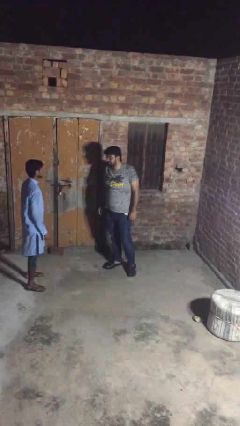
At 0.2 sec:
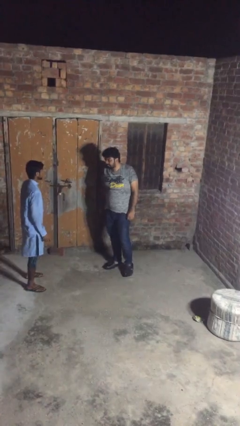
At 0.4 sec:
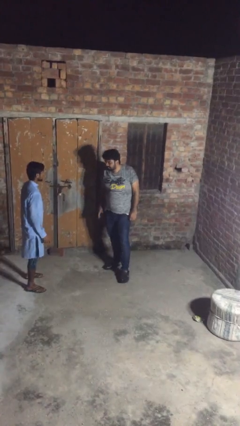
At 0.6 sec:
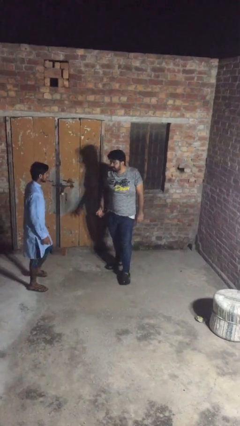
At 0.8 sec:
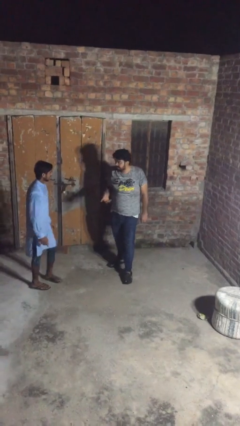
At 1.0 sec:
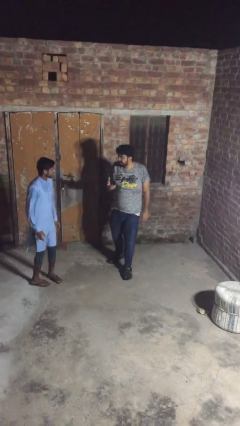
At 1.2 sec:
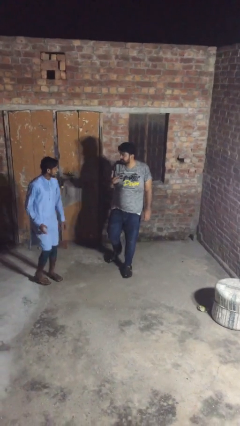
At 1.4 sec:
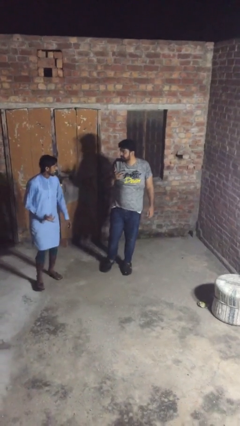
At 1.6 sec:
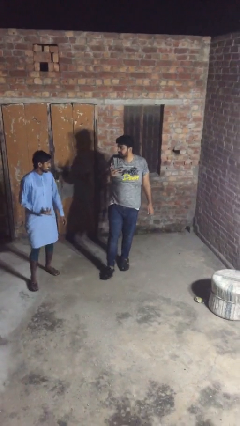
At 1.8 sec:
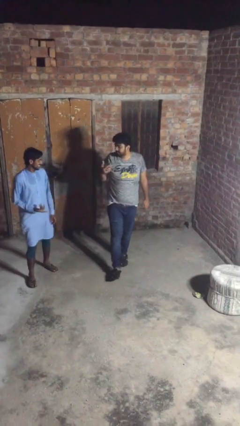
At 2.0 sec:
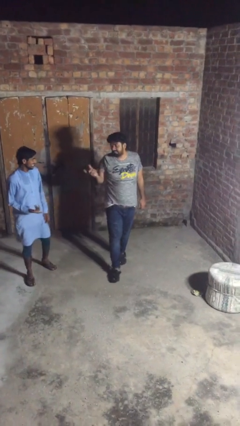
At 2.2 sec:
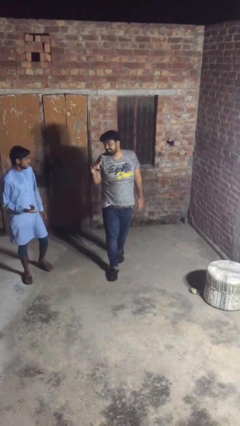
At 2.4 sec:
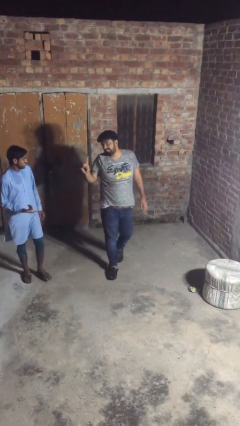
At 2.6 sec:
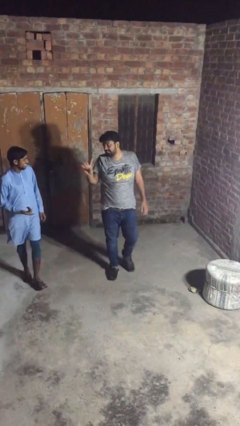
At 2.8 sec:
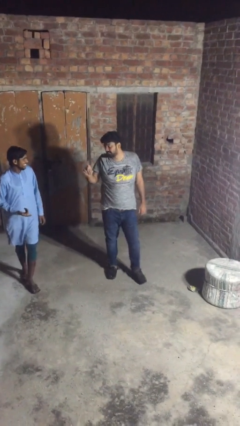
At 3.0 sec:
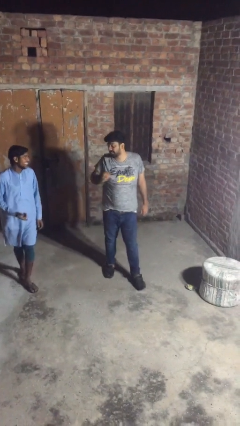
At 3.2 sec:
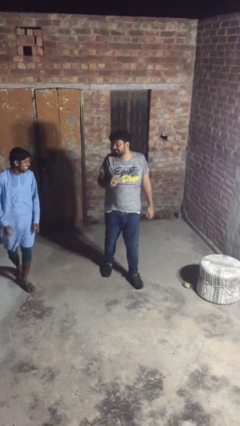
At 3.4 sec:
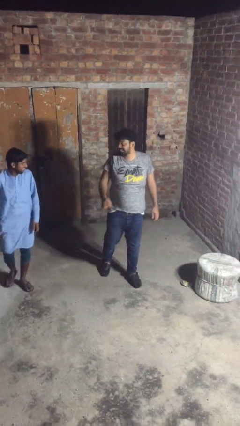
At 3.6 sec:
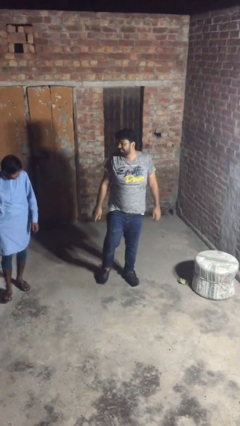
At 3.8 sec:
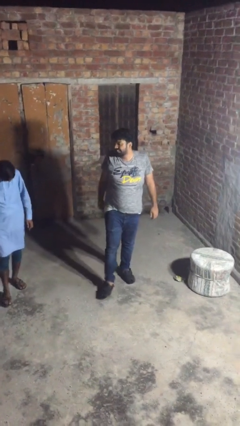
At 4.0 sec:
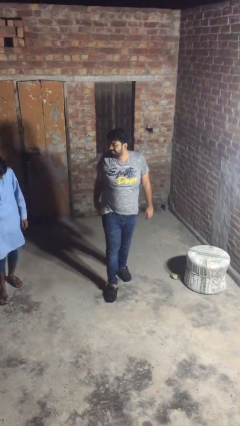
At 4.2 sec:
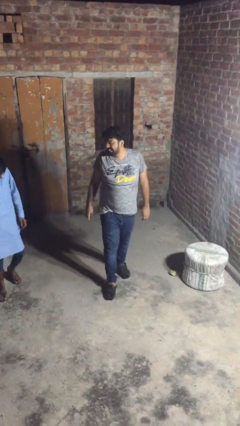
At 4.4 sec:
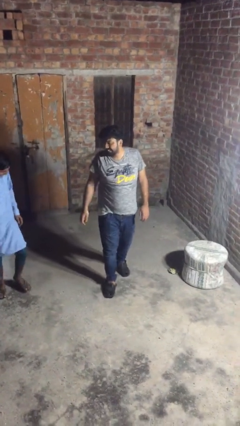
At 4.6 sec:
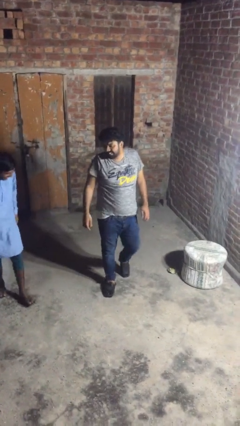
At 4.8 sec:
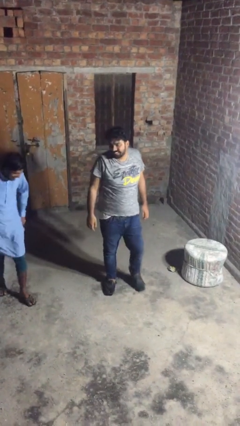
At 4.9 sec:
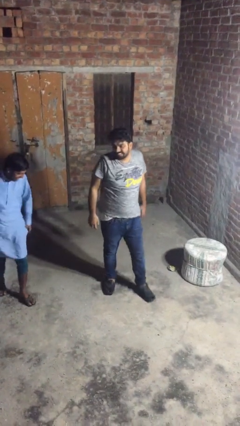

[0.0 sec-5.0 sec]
person talks to person

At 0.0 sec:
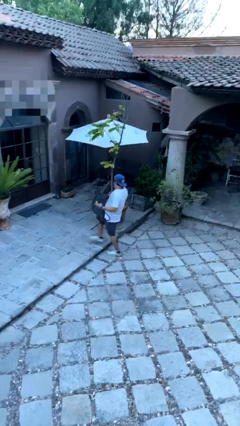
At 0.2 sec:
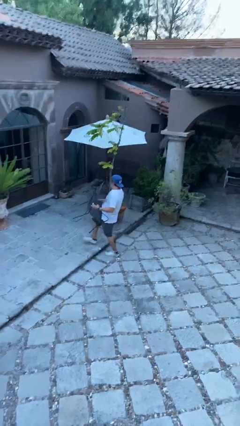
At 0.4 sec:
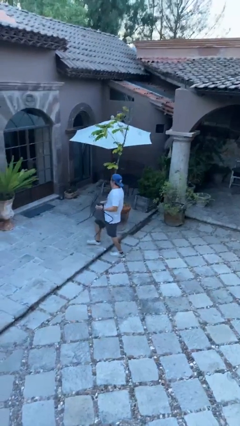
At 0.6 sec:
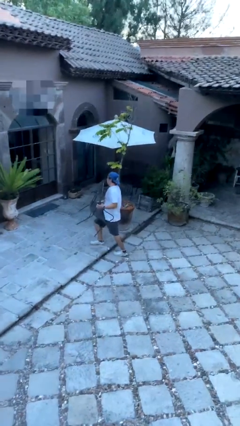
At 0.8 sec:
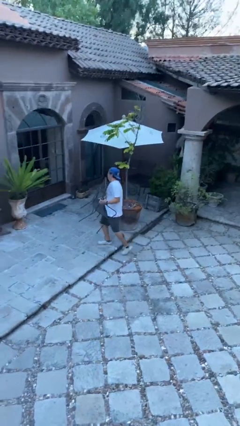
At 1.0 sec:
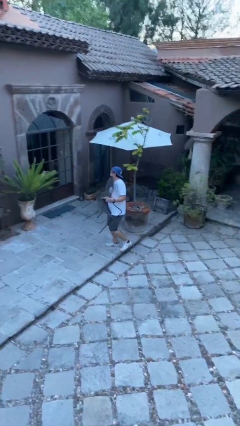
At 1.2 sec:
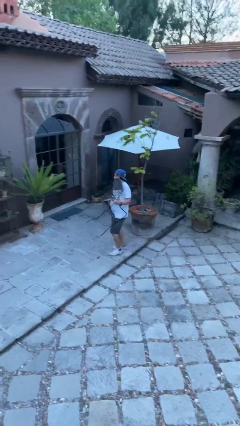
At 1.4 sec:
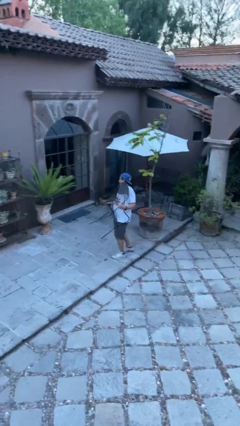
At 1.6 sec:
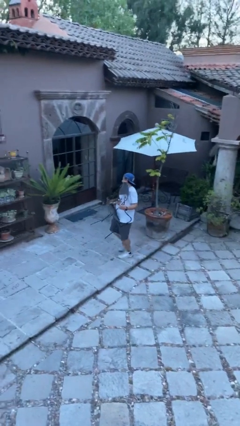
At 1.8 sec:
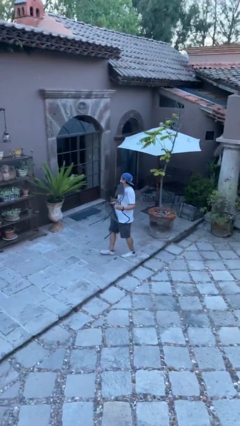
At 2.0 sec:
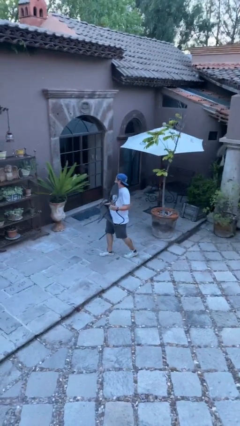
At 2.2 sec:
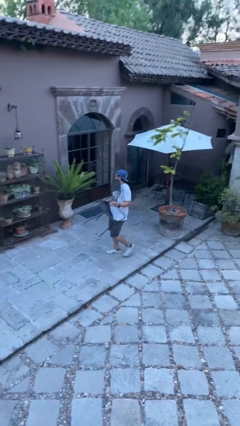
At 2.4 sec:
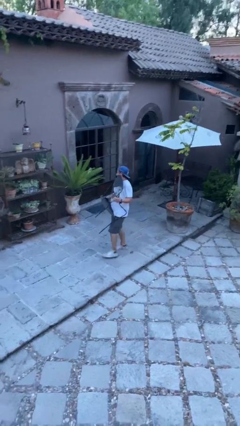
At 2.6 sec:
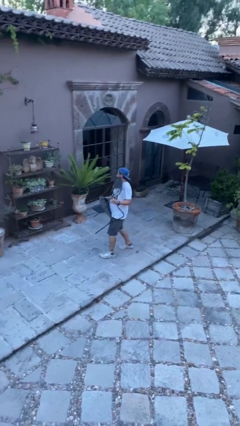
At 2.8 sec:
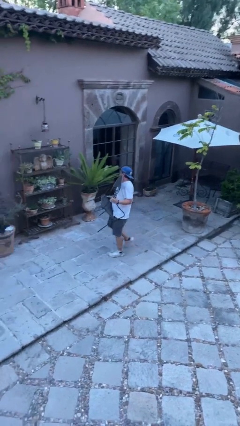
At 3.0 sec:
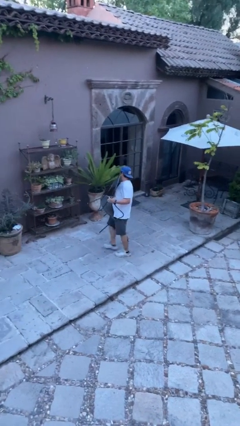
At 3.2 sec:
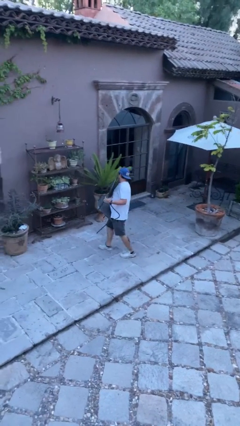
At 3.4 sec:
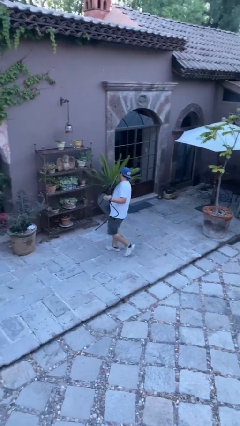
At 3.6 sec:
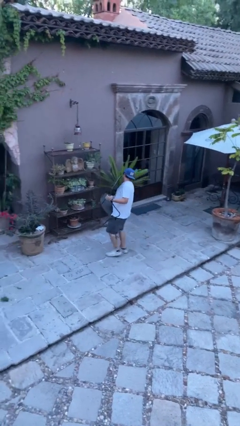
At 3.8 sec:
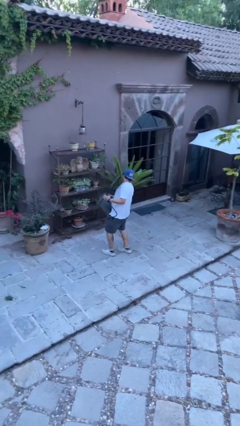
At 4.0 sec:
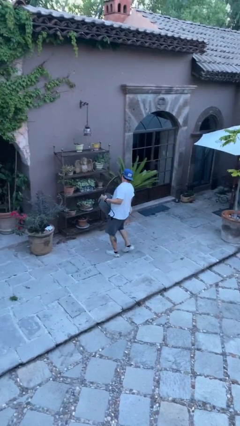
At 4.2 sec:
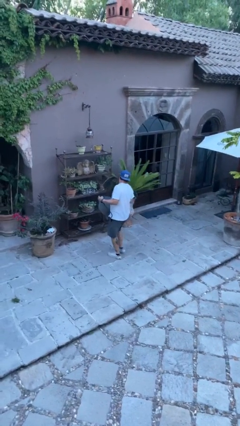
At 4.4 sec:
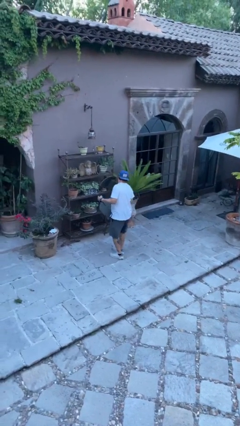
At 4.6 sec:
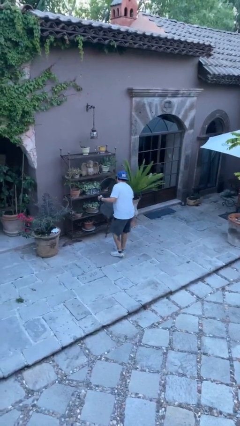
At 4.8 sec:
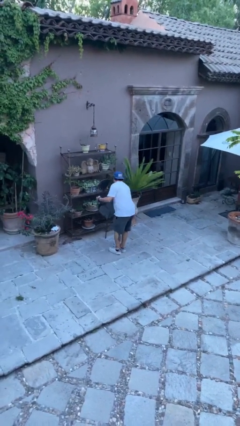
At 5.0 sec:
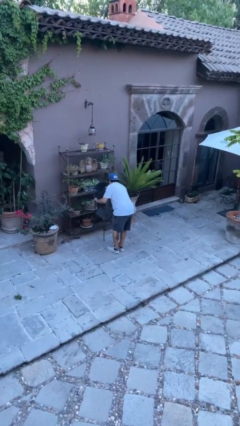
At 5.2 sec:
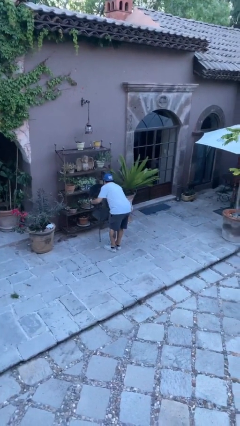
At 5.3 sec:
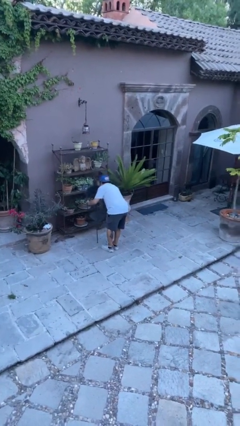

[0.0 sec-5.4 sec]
person carries heavy object

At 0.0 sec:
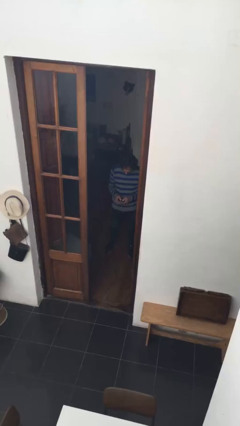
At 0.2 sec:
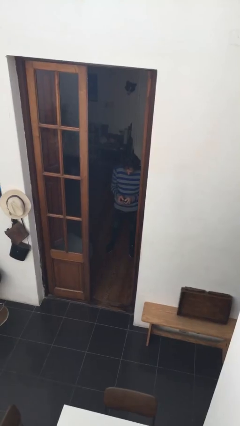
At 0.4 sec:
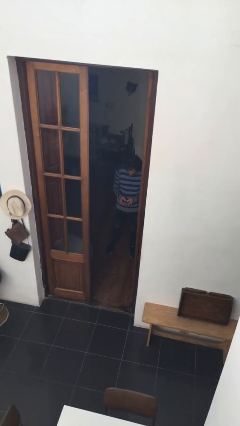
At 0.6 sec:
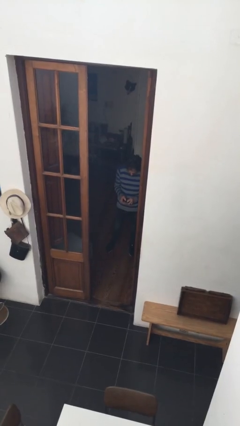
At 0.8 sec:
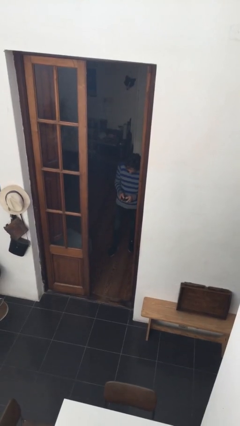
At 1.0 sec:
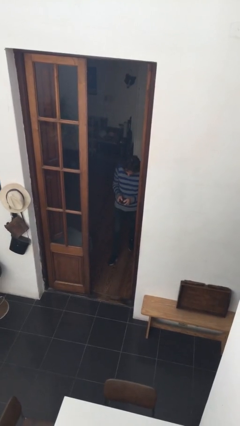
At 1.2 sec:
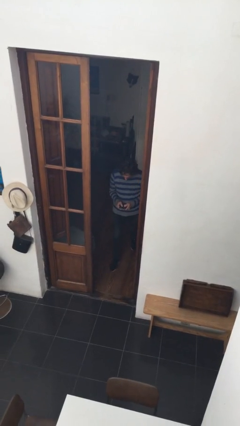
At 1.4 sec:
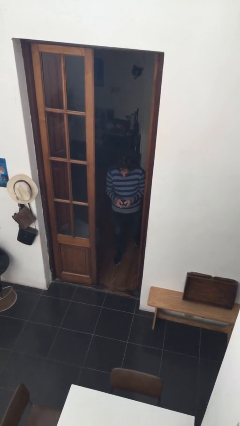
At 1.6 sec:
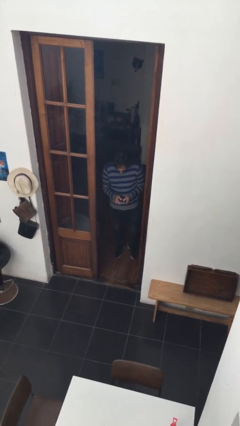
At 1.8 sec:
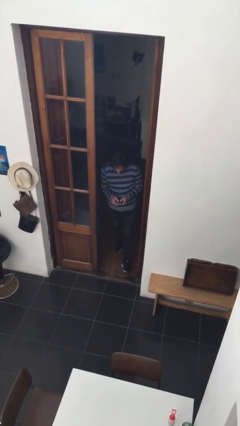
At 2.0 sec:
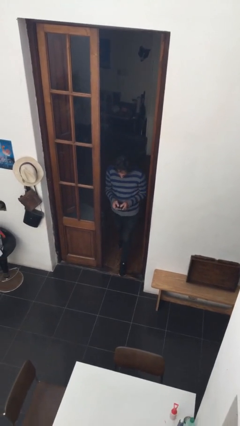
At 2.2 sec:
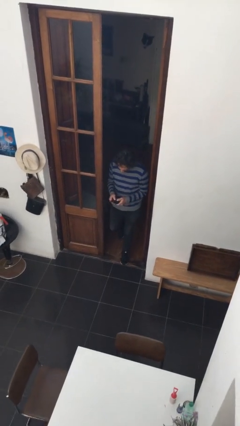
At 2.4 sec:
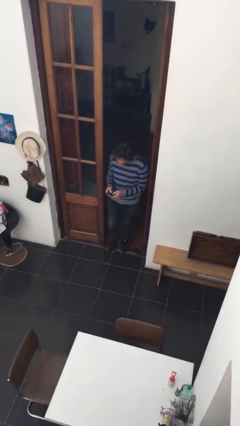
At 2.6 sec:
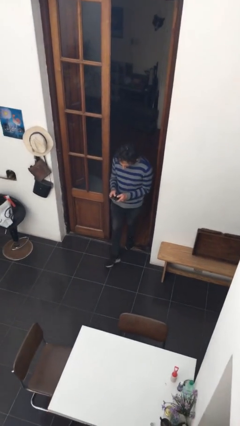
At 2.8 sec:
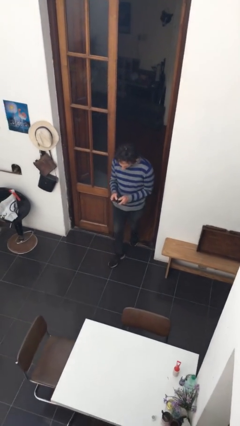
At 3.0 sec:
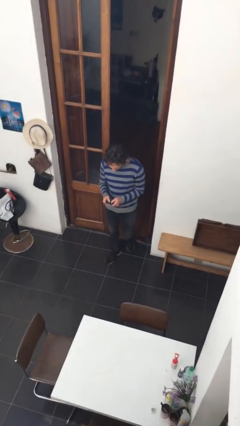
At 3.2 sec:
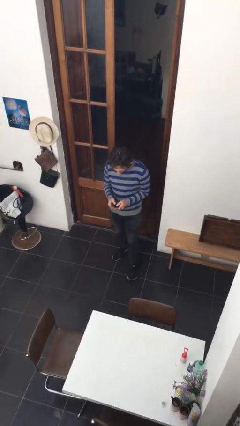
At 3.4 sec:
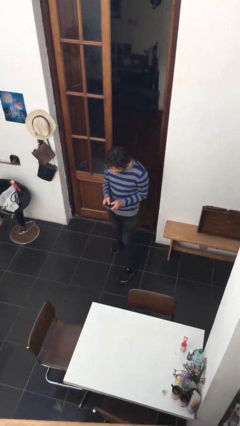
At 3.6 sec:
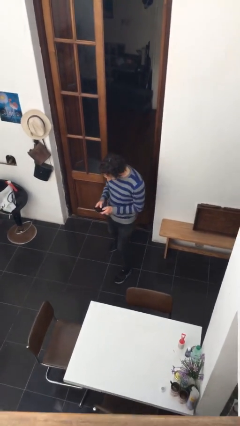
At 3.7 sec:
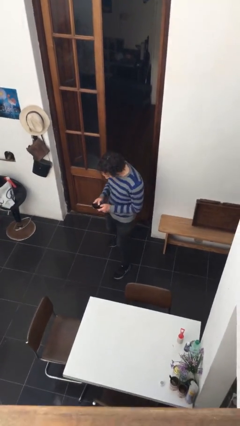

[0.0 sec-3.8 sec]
person enters scene through structure

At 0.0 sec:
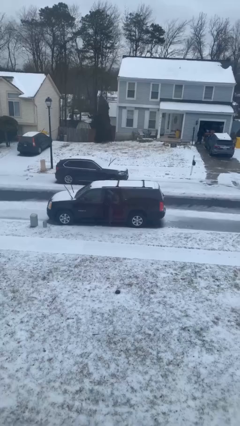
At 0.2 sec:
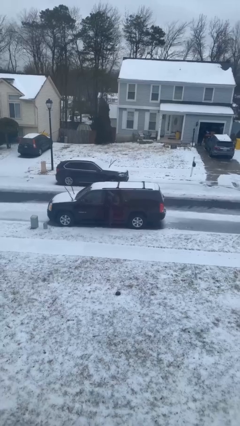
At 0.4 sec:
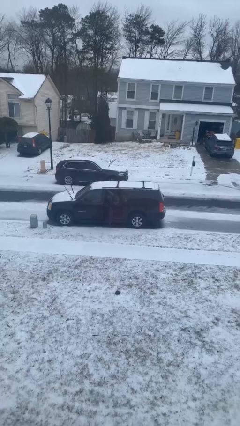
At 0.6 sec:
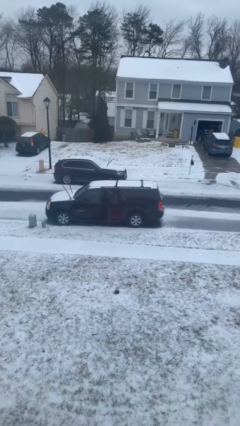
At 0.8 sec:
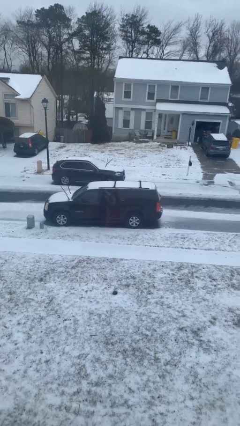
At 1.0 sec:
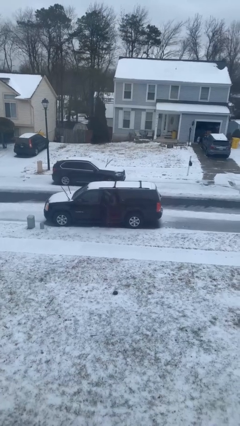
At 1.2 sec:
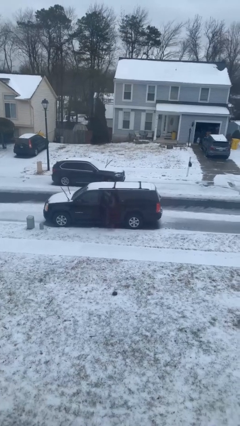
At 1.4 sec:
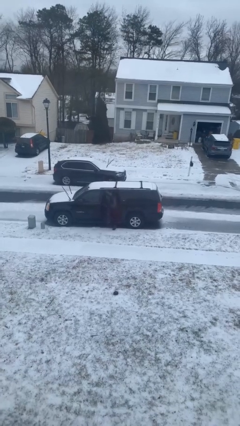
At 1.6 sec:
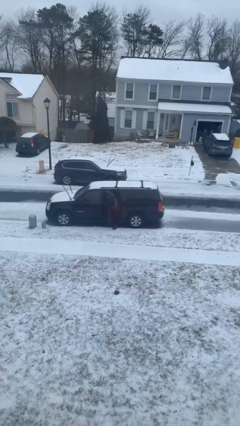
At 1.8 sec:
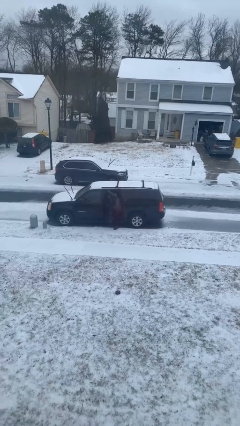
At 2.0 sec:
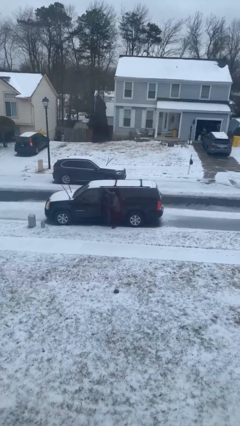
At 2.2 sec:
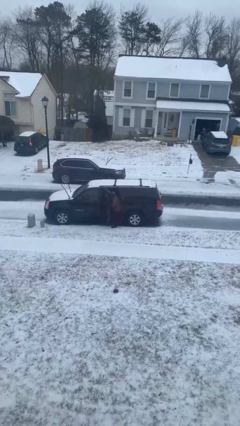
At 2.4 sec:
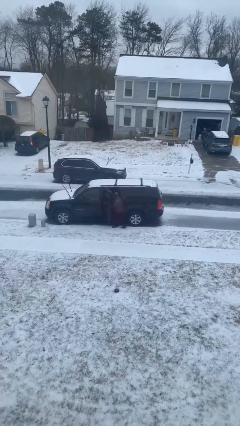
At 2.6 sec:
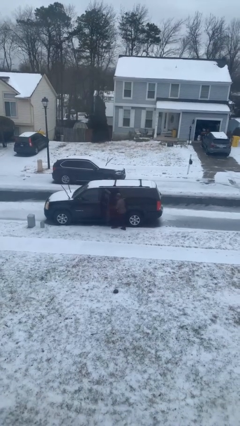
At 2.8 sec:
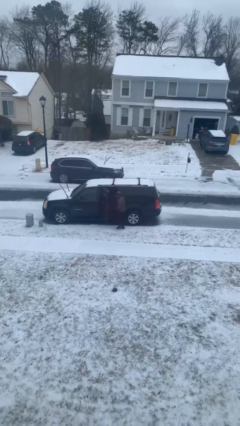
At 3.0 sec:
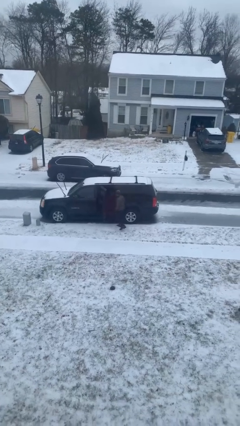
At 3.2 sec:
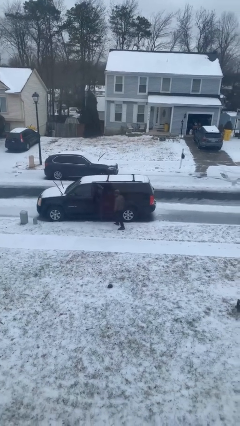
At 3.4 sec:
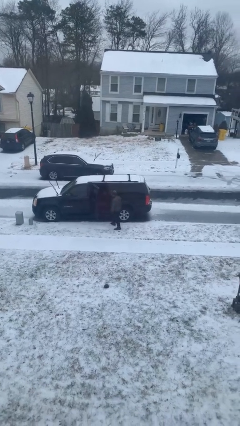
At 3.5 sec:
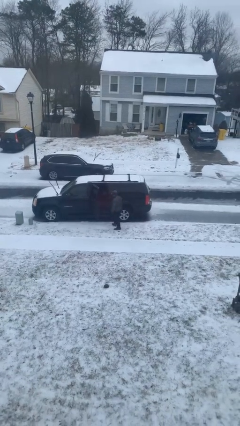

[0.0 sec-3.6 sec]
person exits car
